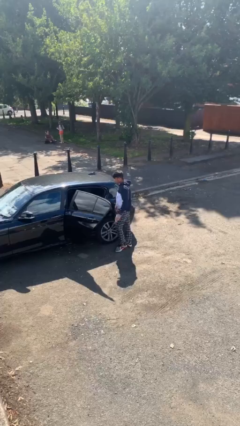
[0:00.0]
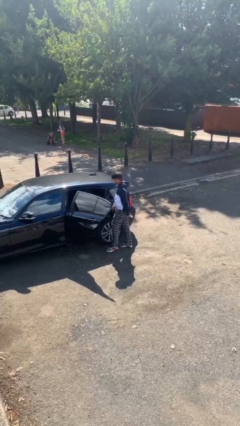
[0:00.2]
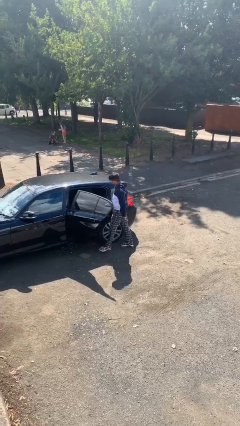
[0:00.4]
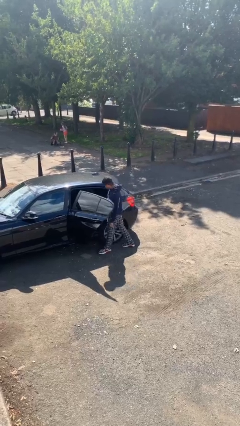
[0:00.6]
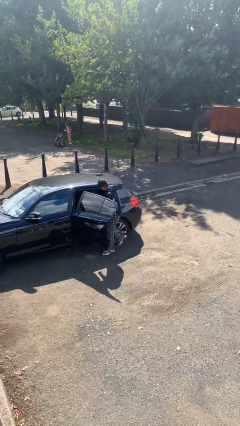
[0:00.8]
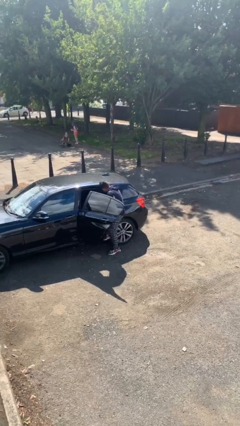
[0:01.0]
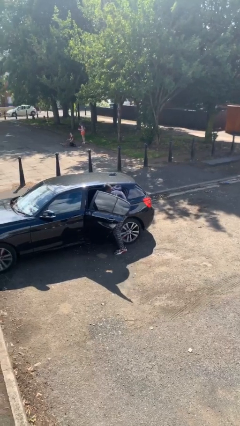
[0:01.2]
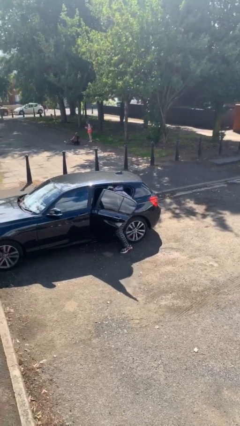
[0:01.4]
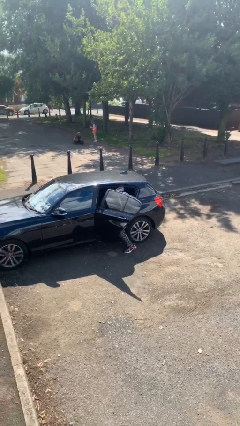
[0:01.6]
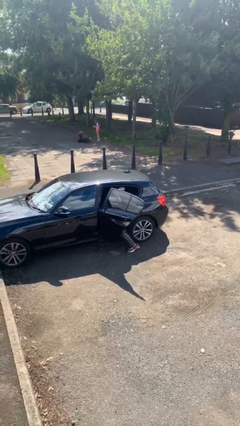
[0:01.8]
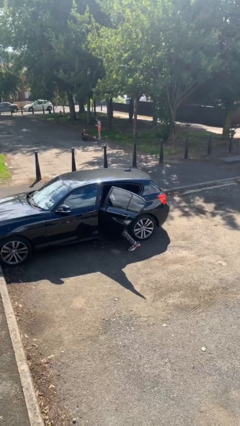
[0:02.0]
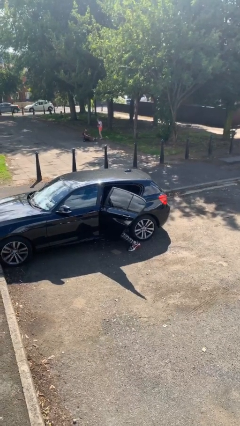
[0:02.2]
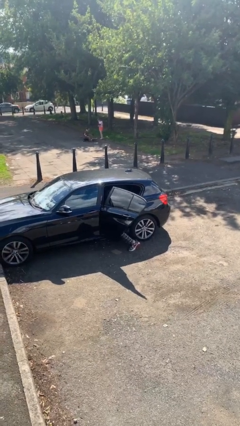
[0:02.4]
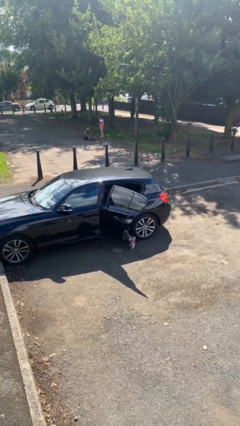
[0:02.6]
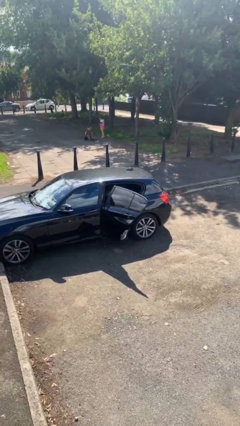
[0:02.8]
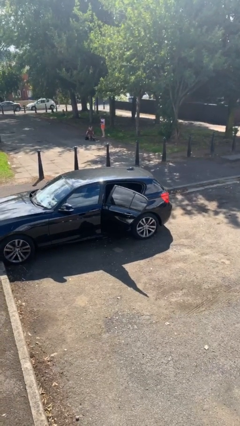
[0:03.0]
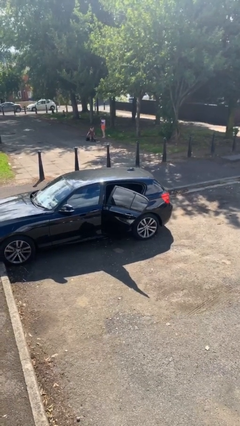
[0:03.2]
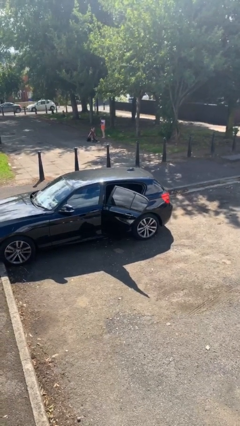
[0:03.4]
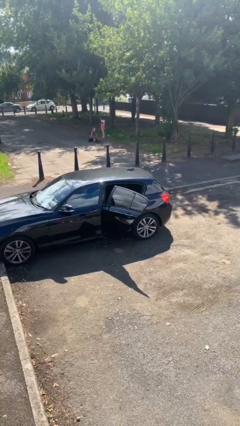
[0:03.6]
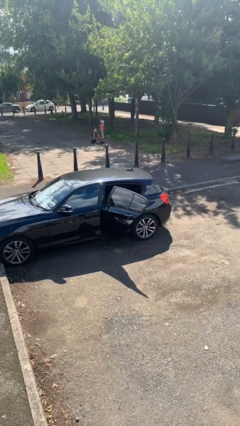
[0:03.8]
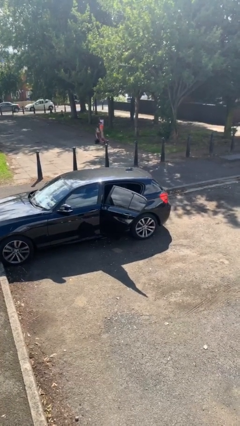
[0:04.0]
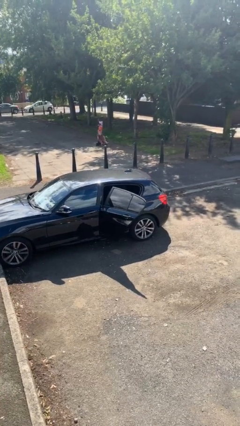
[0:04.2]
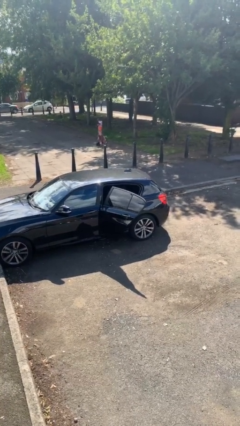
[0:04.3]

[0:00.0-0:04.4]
person enters car

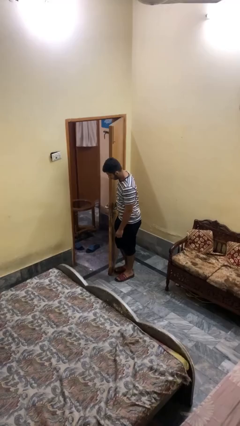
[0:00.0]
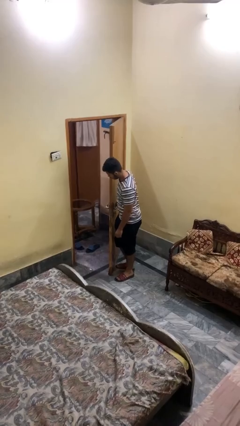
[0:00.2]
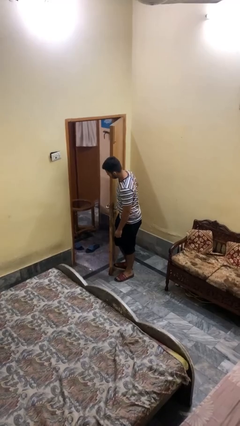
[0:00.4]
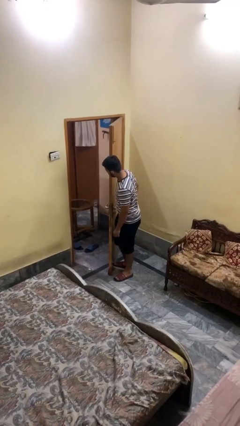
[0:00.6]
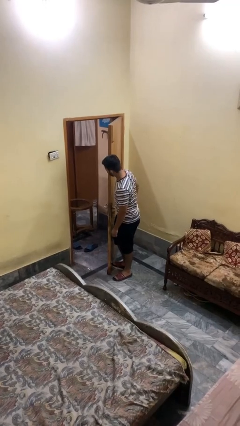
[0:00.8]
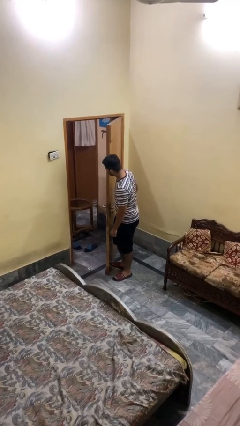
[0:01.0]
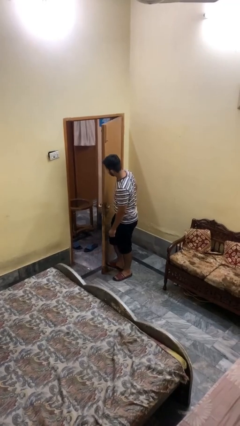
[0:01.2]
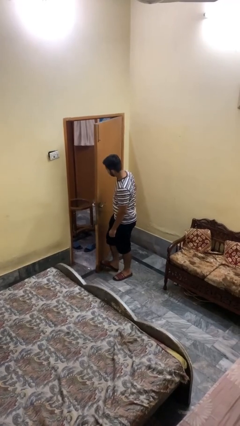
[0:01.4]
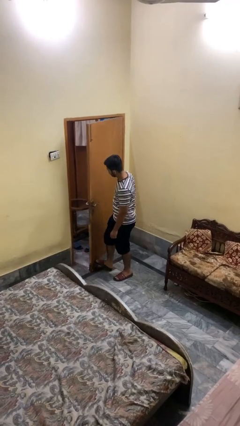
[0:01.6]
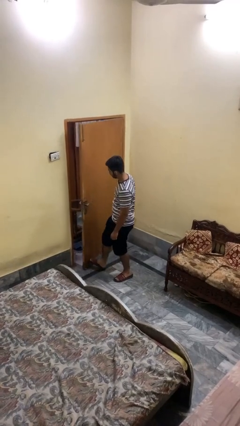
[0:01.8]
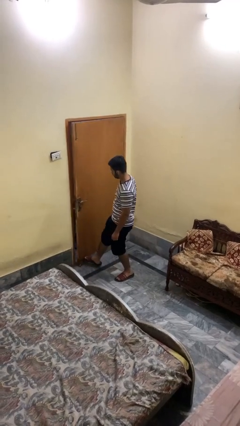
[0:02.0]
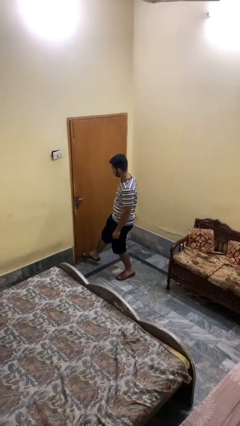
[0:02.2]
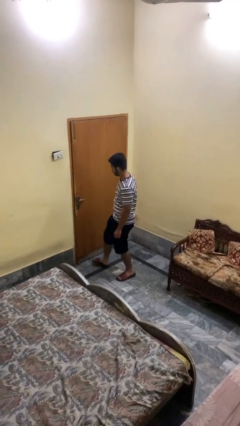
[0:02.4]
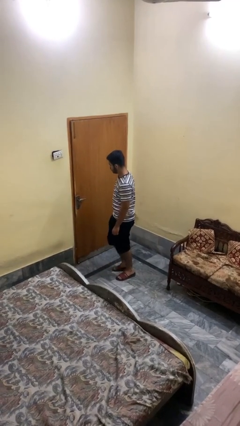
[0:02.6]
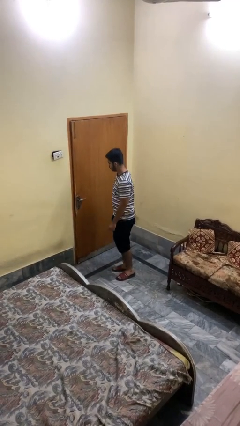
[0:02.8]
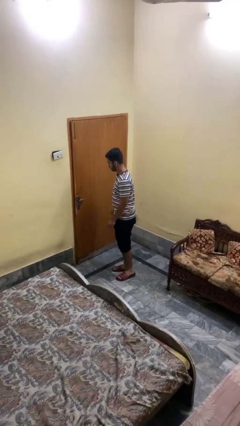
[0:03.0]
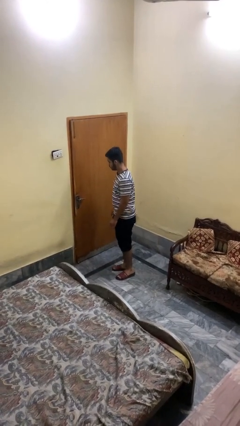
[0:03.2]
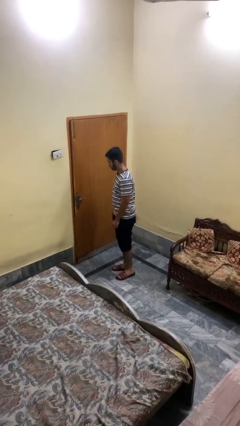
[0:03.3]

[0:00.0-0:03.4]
person closes door with foot

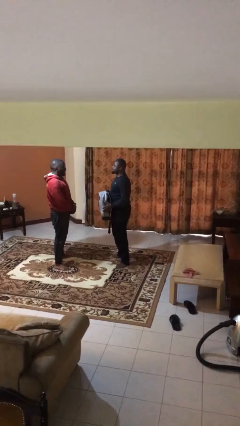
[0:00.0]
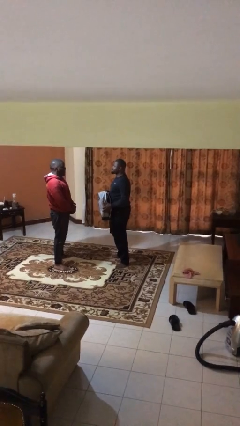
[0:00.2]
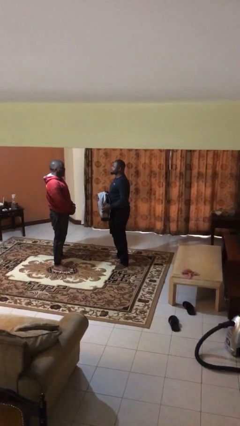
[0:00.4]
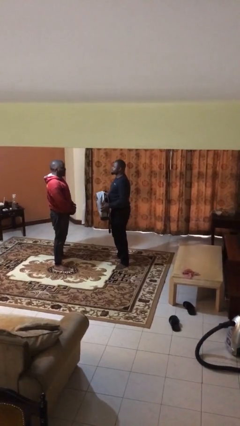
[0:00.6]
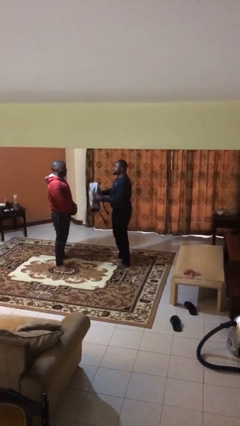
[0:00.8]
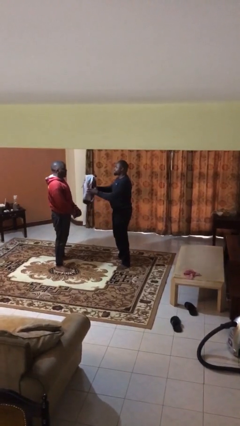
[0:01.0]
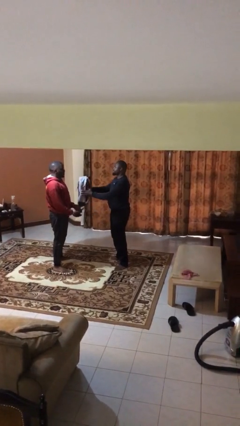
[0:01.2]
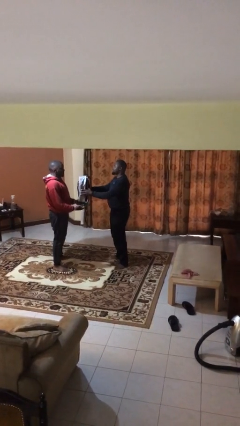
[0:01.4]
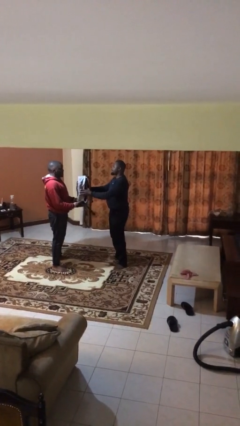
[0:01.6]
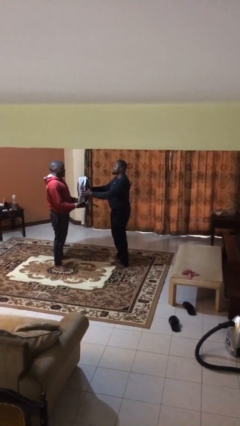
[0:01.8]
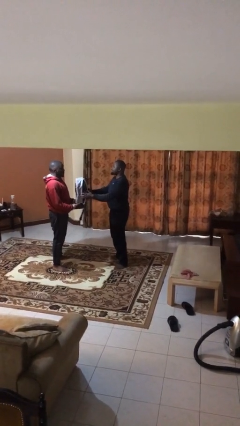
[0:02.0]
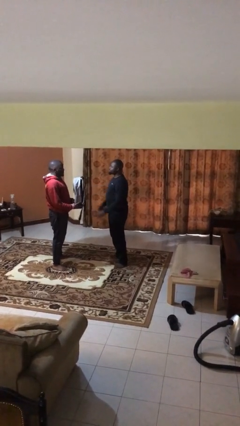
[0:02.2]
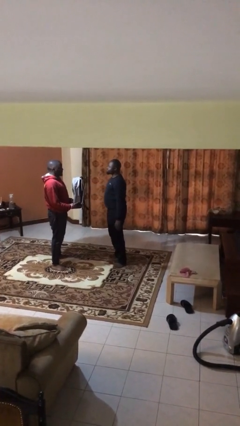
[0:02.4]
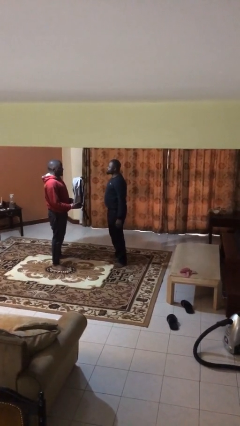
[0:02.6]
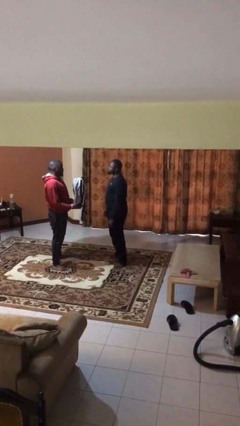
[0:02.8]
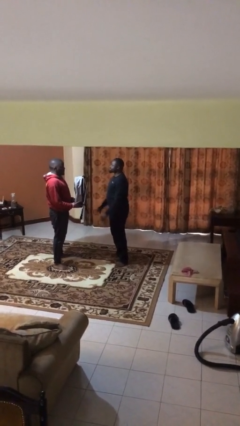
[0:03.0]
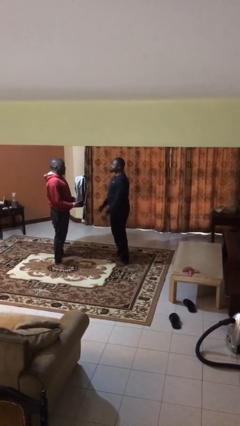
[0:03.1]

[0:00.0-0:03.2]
person transfers object to person

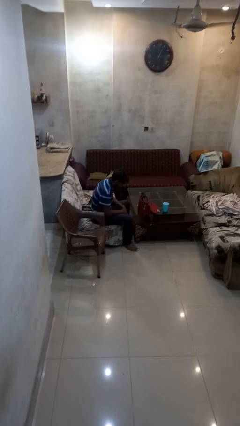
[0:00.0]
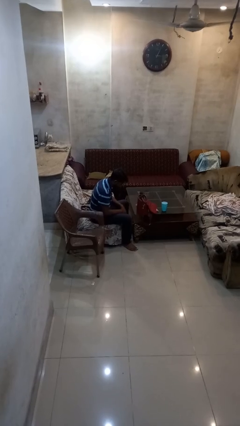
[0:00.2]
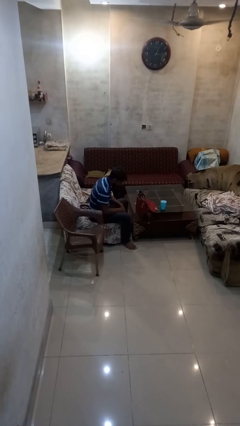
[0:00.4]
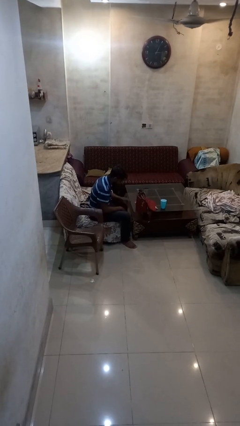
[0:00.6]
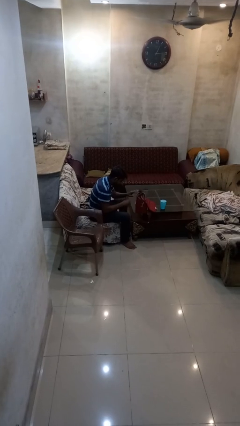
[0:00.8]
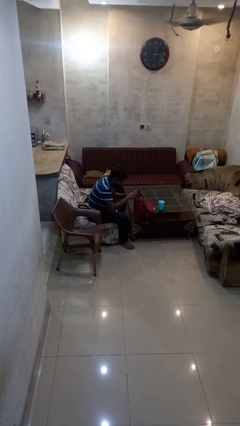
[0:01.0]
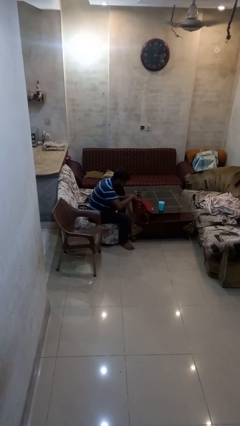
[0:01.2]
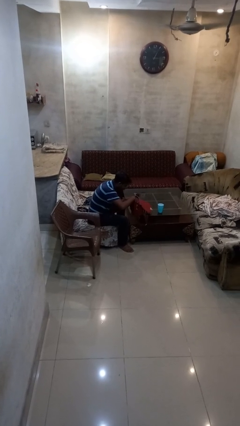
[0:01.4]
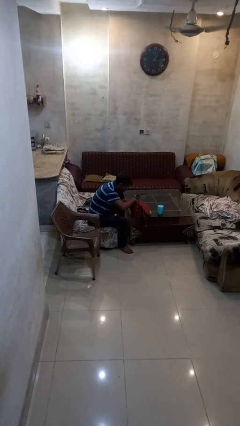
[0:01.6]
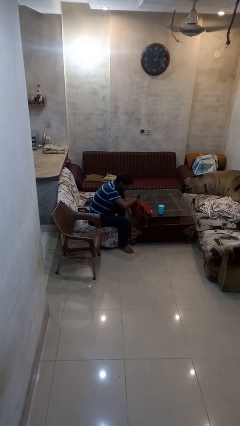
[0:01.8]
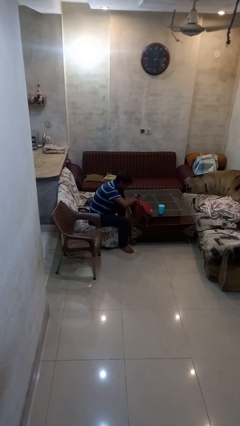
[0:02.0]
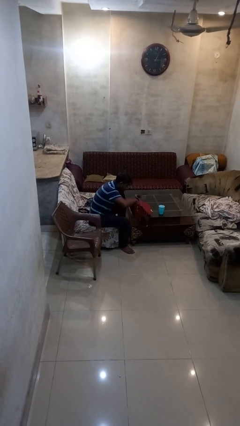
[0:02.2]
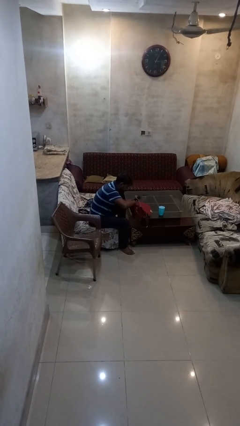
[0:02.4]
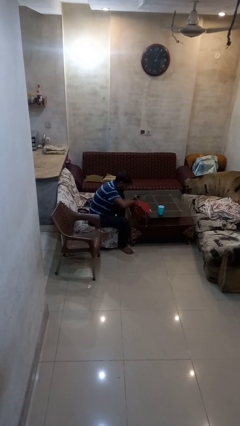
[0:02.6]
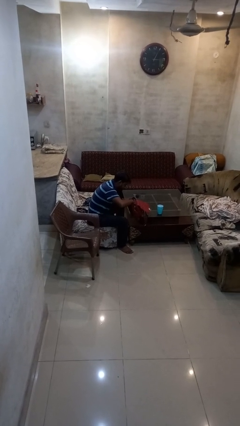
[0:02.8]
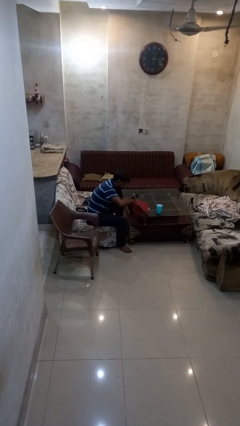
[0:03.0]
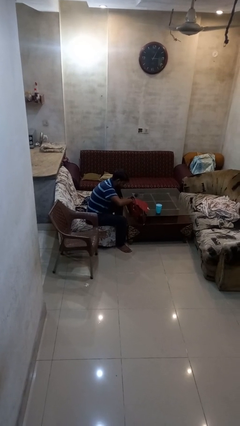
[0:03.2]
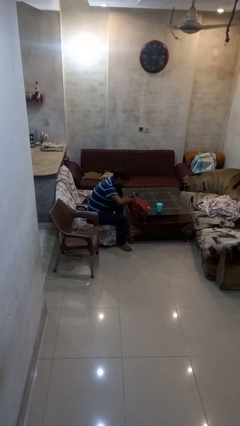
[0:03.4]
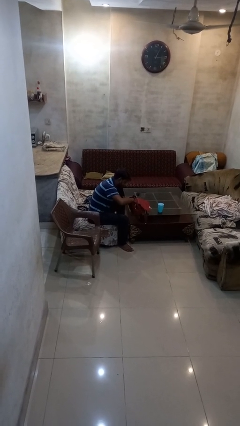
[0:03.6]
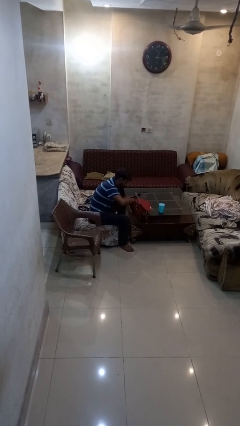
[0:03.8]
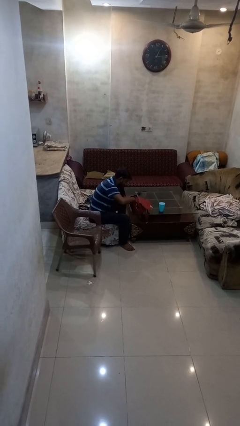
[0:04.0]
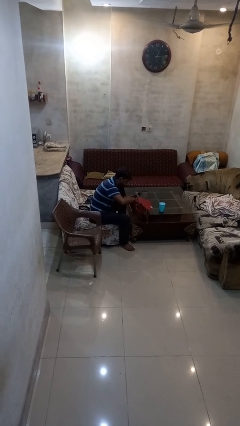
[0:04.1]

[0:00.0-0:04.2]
person searches in purse

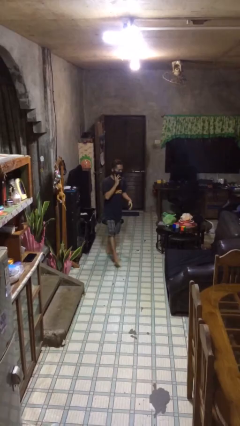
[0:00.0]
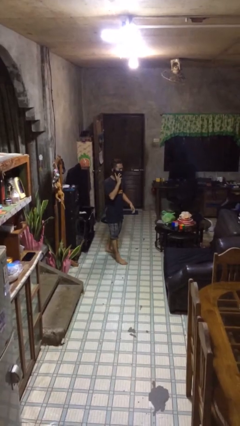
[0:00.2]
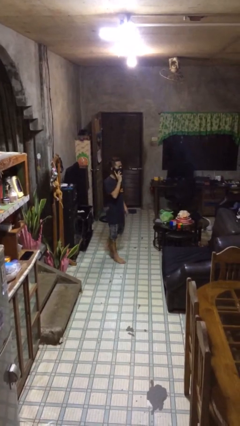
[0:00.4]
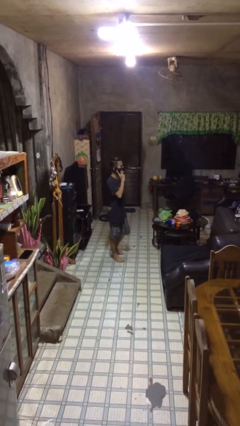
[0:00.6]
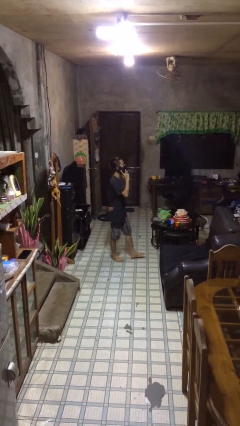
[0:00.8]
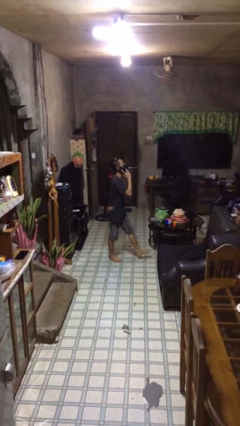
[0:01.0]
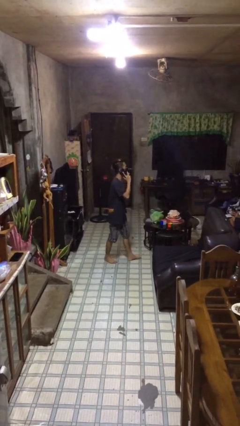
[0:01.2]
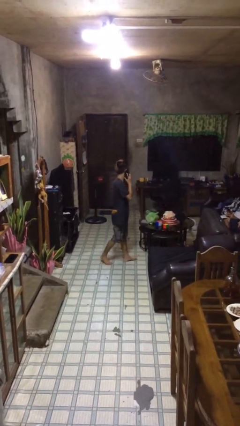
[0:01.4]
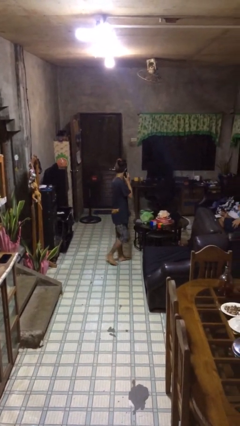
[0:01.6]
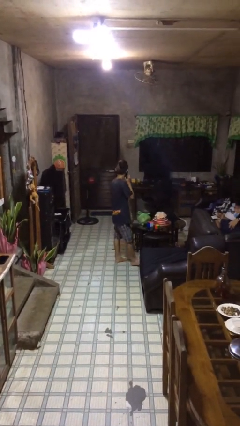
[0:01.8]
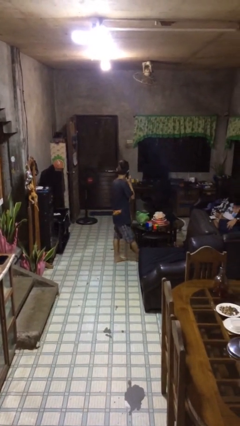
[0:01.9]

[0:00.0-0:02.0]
person talks on phone

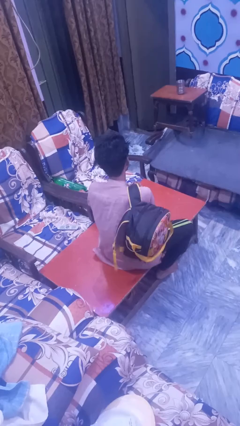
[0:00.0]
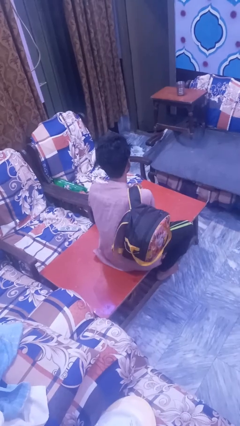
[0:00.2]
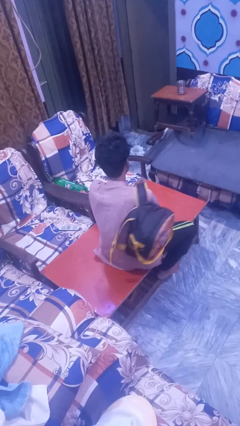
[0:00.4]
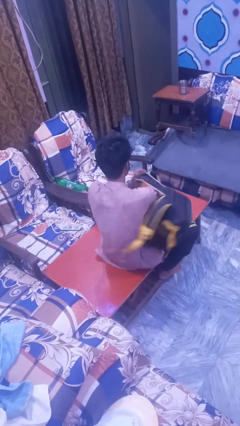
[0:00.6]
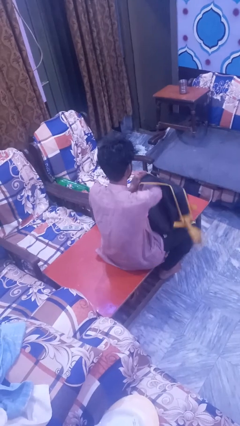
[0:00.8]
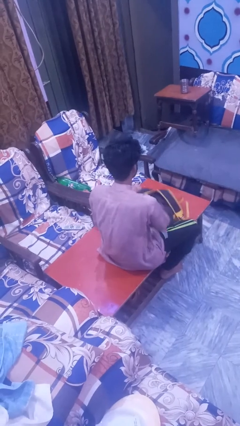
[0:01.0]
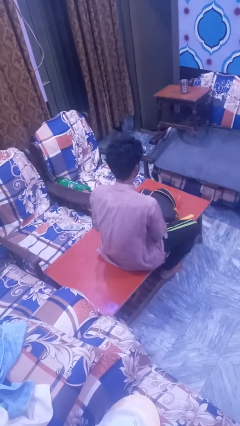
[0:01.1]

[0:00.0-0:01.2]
person takes off backpack
